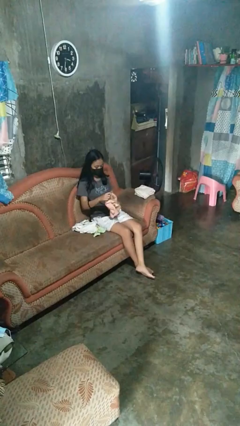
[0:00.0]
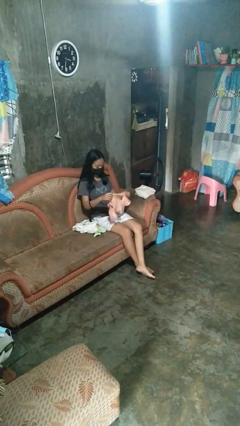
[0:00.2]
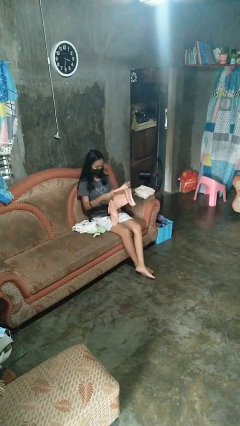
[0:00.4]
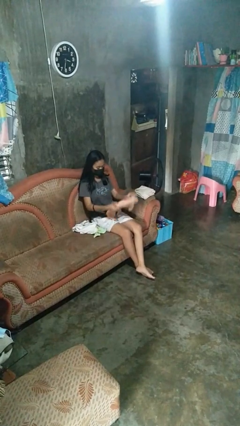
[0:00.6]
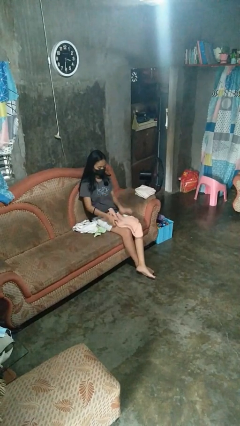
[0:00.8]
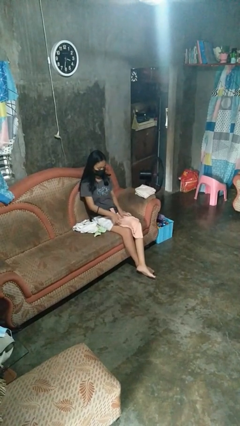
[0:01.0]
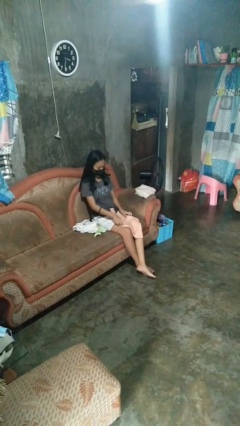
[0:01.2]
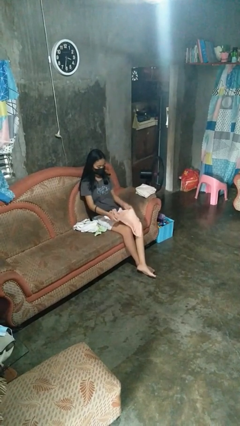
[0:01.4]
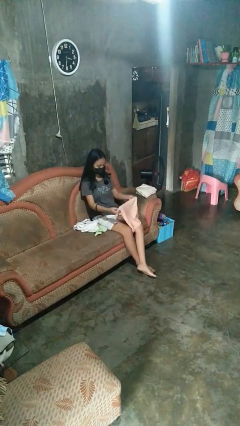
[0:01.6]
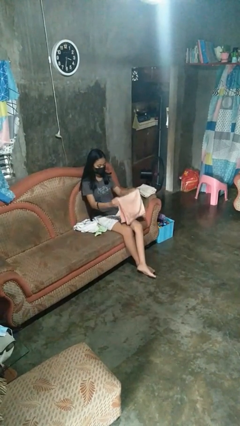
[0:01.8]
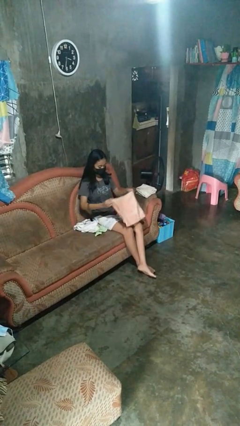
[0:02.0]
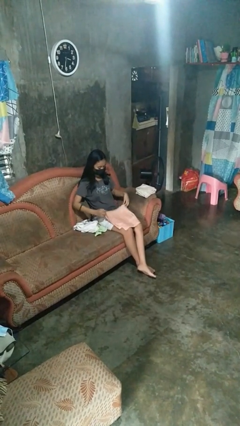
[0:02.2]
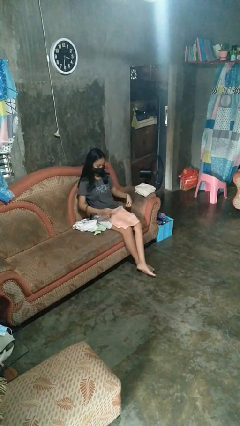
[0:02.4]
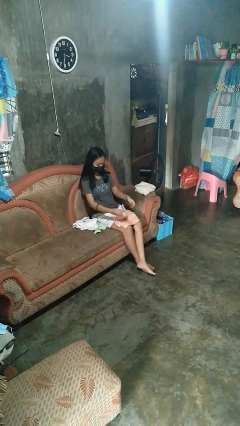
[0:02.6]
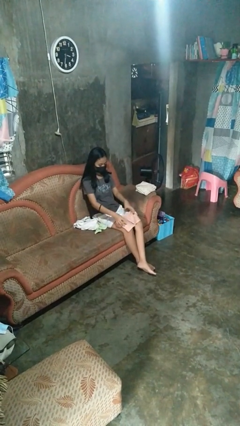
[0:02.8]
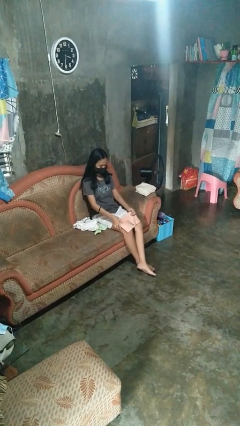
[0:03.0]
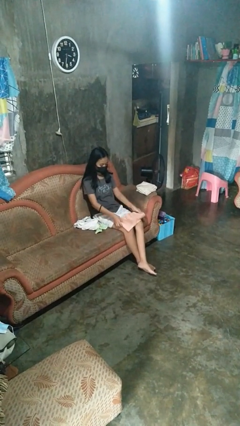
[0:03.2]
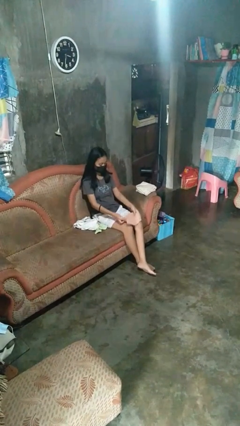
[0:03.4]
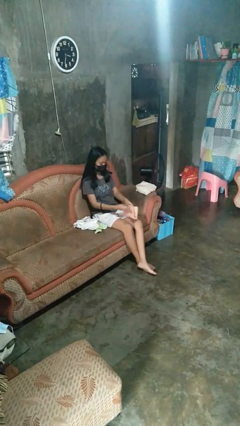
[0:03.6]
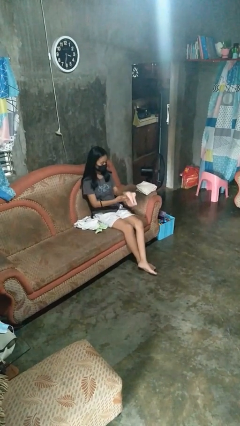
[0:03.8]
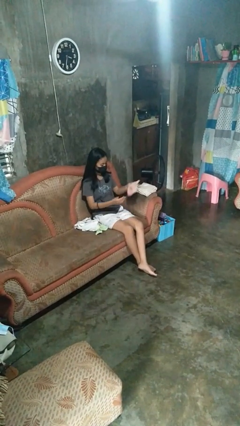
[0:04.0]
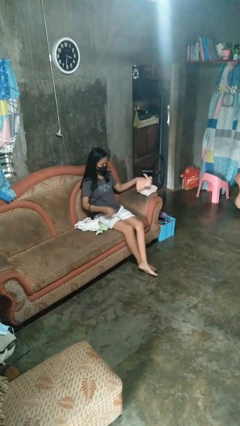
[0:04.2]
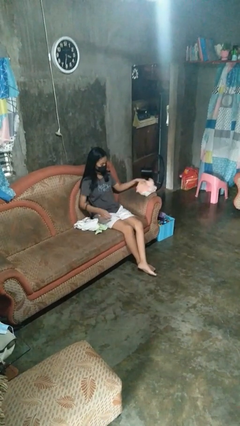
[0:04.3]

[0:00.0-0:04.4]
person folds towel

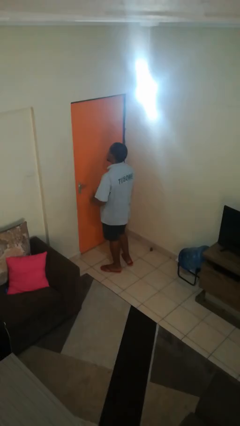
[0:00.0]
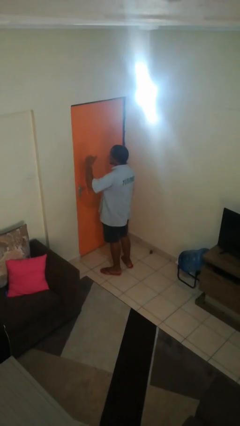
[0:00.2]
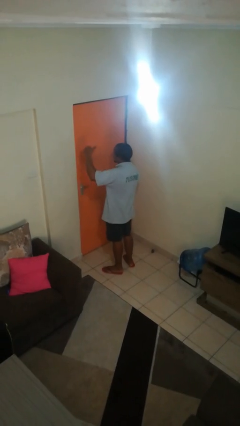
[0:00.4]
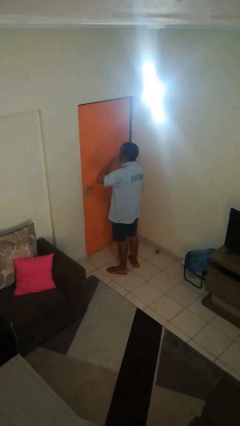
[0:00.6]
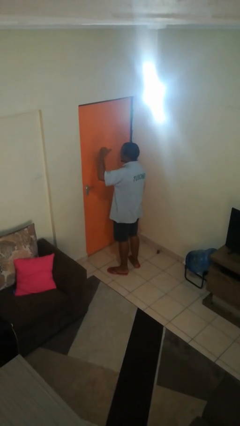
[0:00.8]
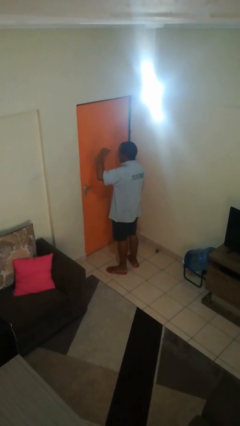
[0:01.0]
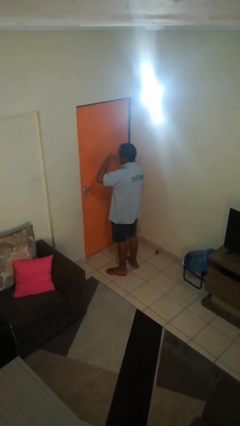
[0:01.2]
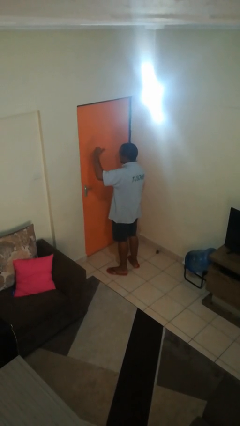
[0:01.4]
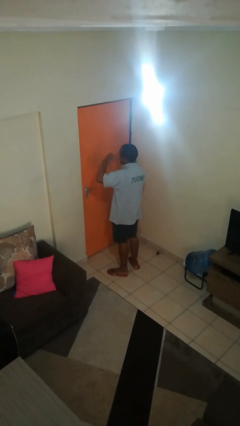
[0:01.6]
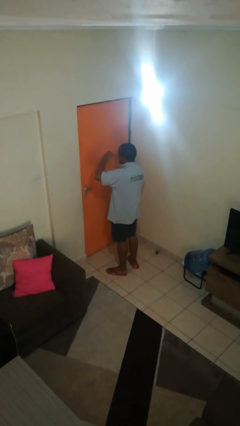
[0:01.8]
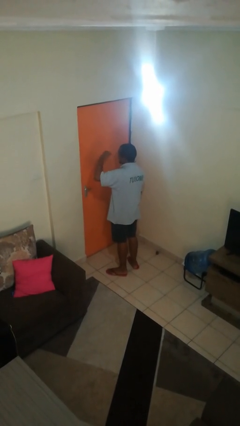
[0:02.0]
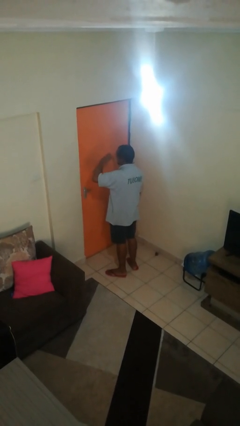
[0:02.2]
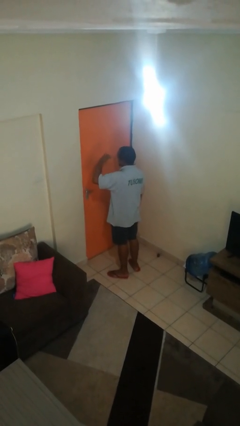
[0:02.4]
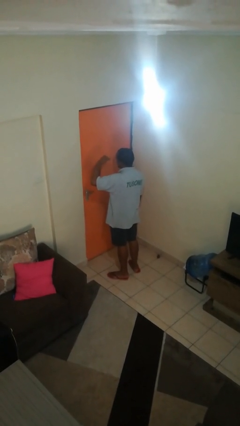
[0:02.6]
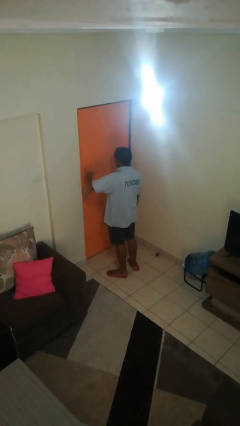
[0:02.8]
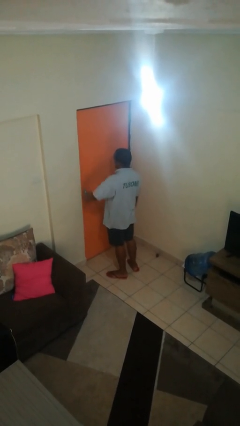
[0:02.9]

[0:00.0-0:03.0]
person gestures call me

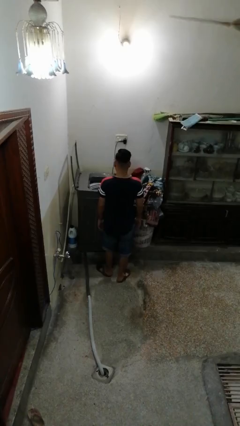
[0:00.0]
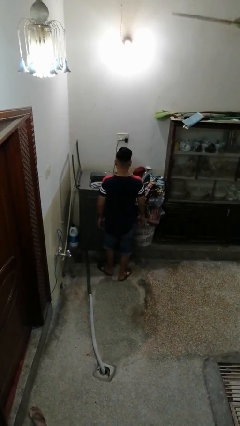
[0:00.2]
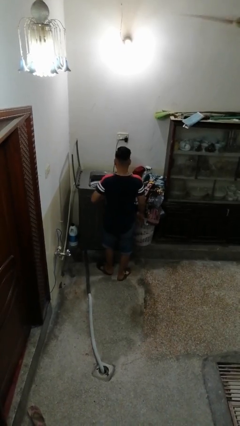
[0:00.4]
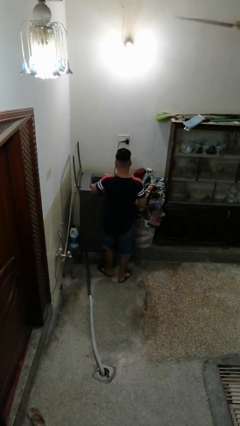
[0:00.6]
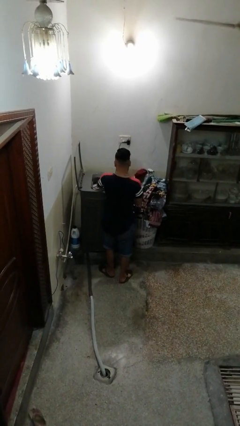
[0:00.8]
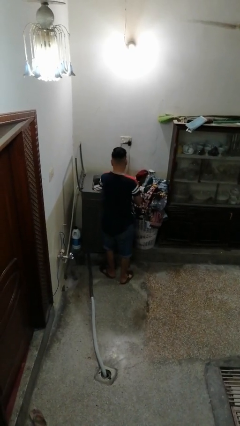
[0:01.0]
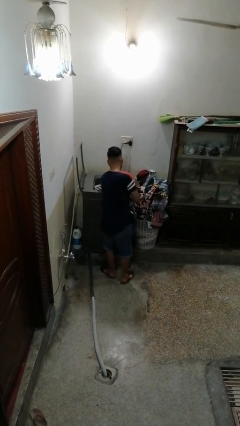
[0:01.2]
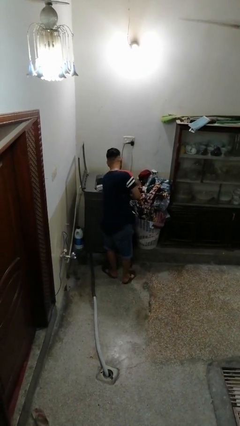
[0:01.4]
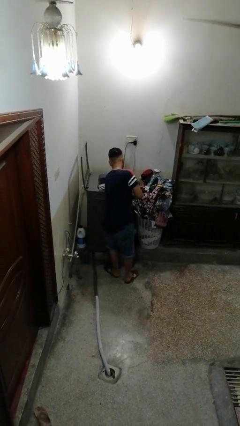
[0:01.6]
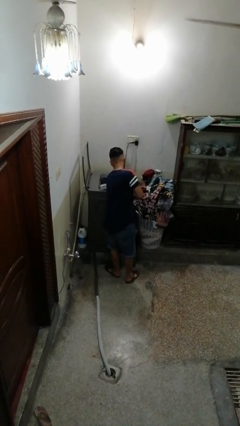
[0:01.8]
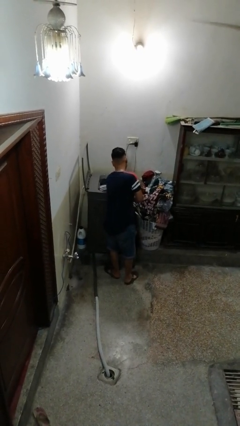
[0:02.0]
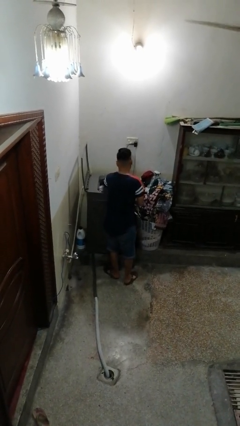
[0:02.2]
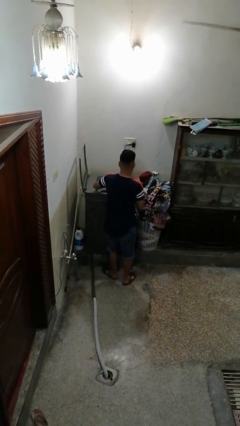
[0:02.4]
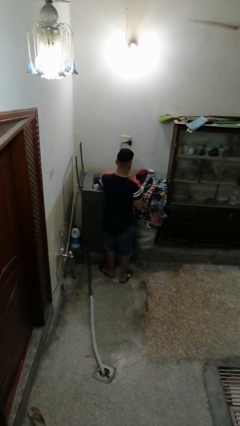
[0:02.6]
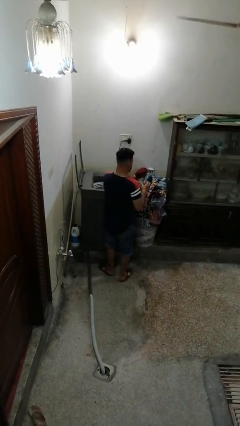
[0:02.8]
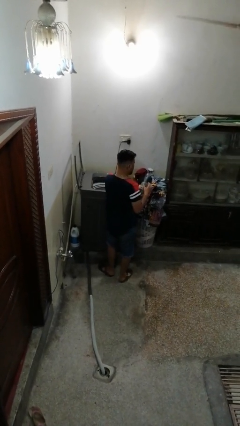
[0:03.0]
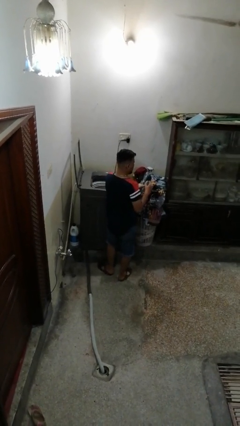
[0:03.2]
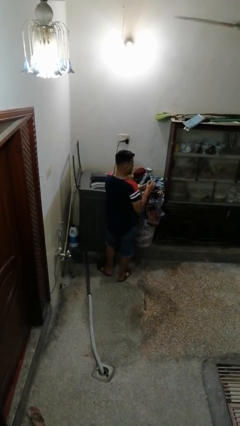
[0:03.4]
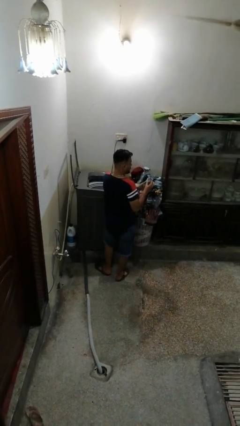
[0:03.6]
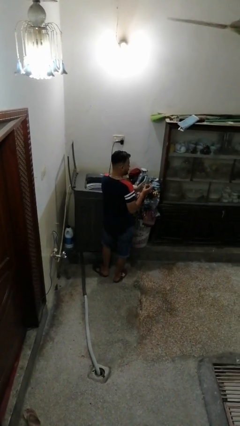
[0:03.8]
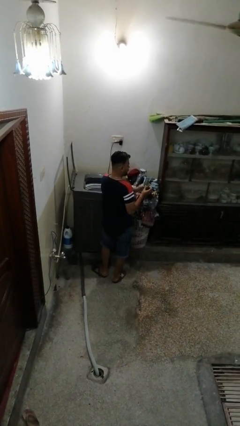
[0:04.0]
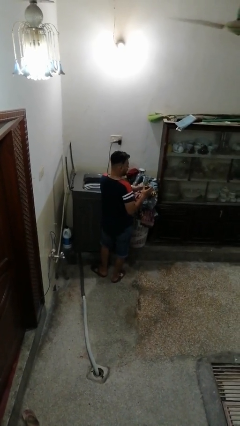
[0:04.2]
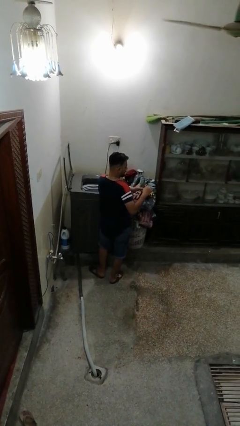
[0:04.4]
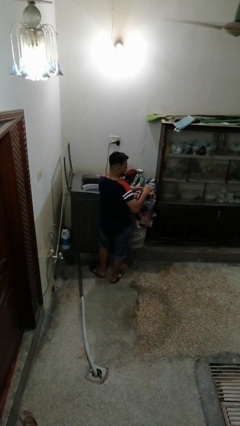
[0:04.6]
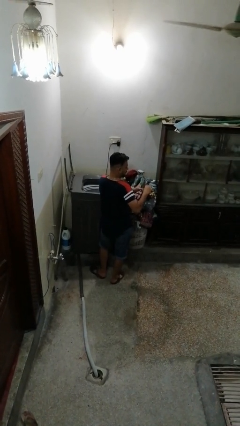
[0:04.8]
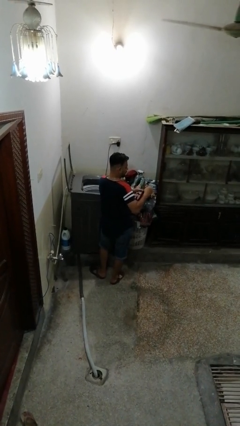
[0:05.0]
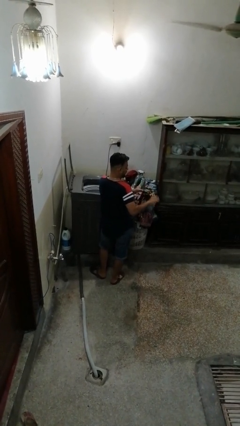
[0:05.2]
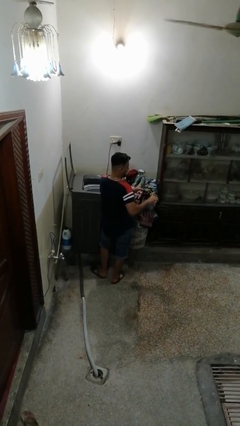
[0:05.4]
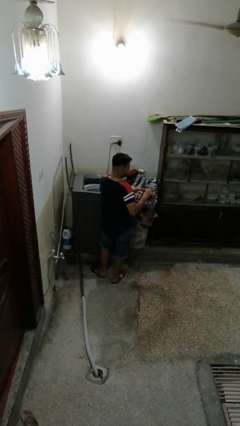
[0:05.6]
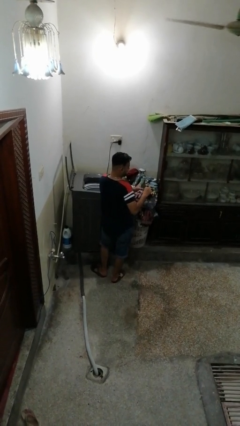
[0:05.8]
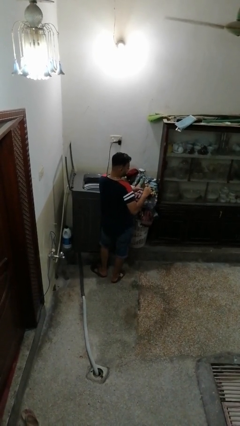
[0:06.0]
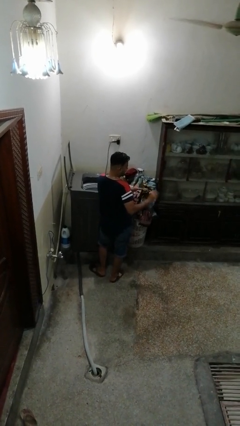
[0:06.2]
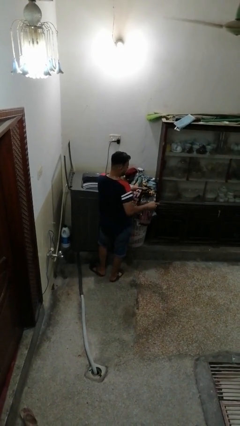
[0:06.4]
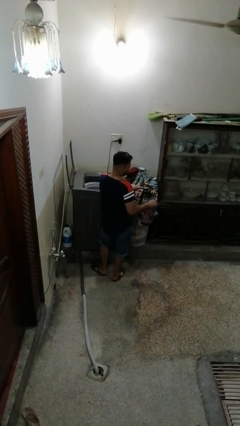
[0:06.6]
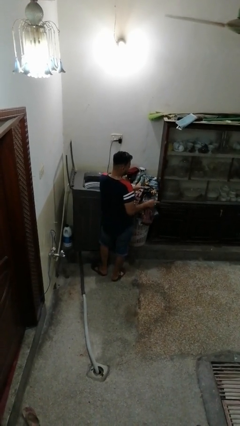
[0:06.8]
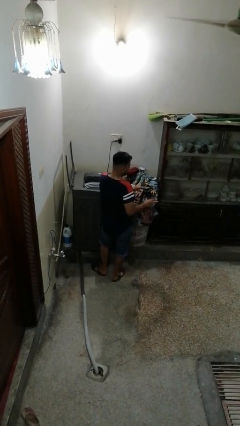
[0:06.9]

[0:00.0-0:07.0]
person cleans dryer lint trap

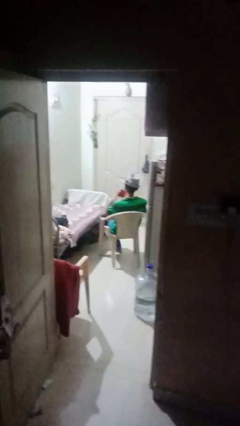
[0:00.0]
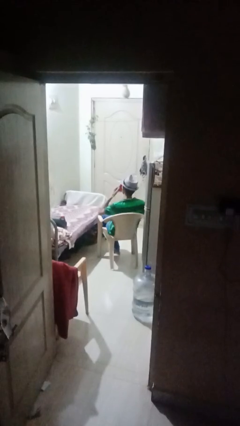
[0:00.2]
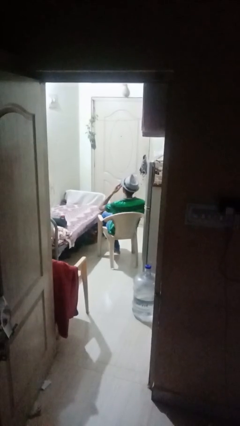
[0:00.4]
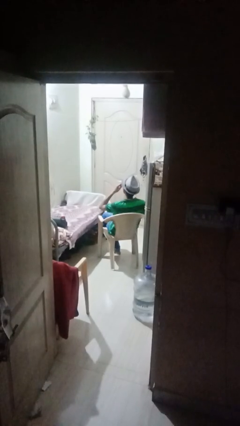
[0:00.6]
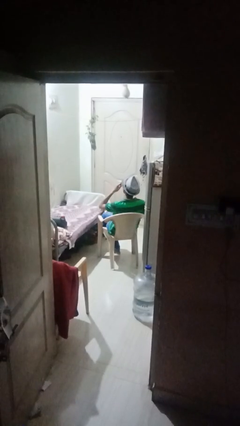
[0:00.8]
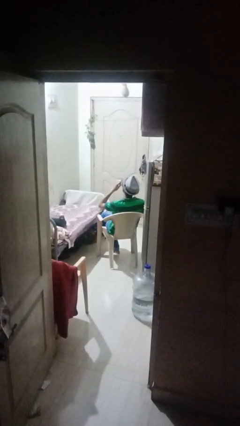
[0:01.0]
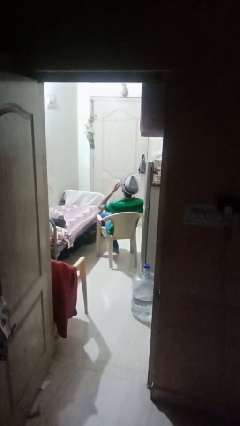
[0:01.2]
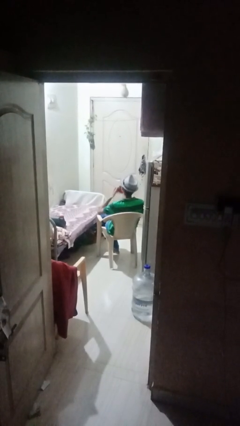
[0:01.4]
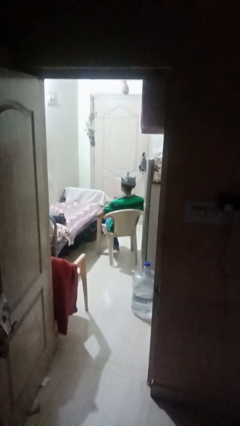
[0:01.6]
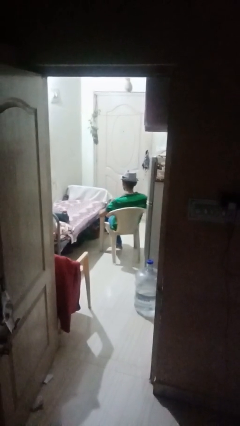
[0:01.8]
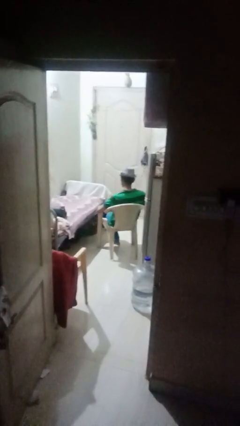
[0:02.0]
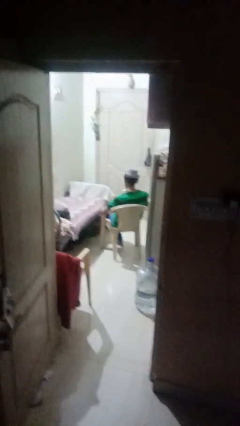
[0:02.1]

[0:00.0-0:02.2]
person drinks from mug

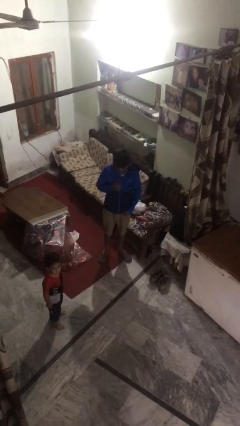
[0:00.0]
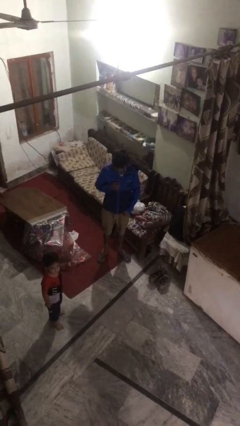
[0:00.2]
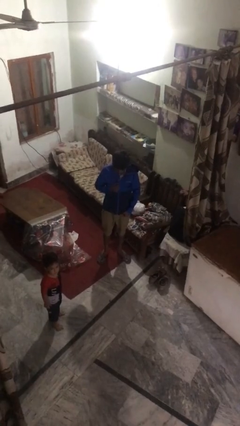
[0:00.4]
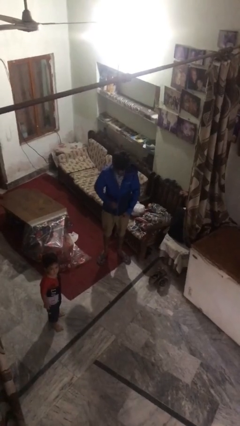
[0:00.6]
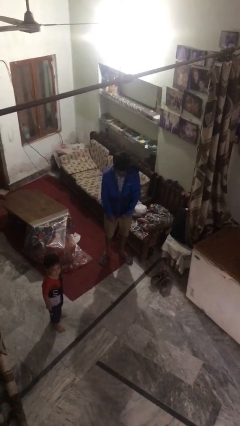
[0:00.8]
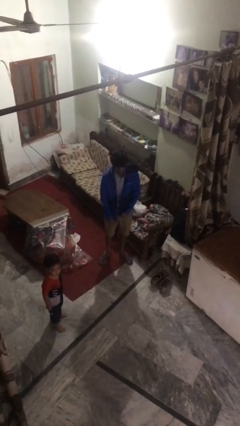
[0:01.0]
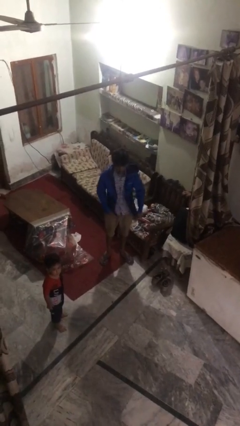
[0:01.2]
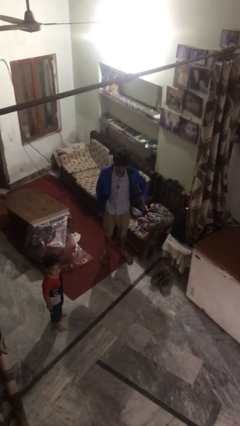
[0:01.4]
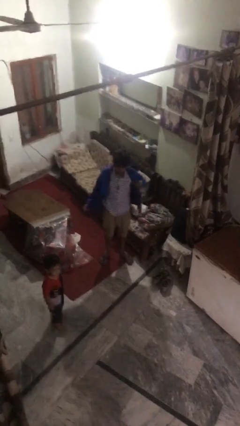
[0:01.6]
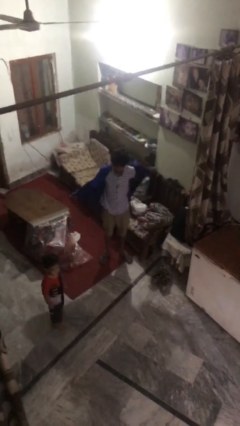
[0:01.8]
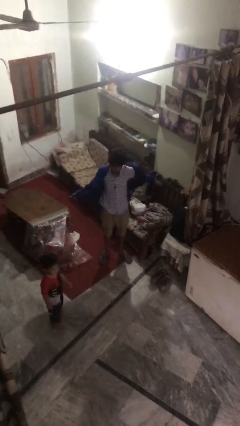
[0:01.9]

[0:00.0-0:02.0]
person unzips jacket
